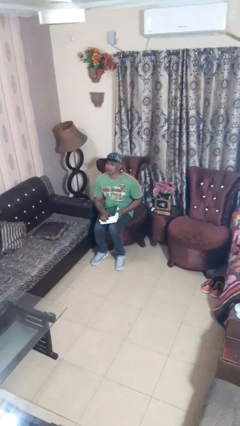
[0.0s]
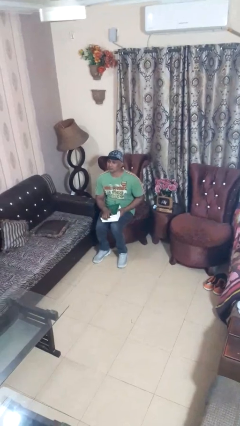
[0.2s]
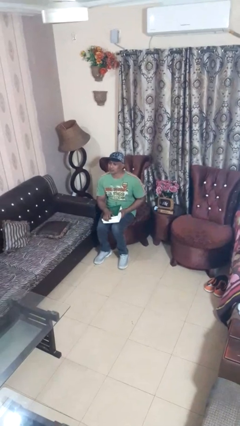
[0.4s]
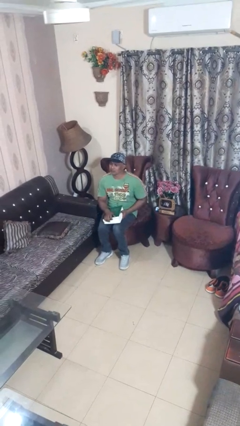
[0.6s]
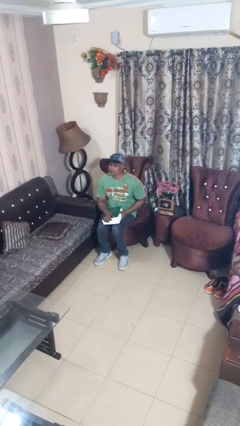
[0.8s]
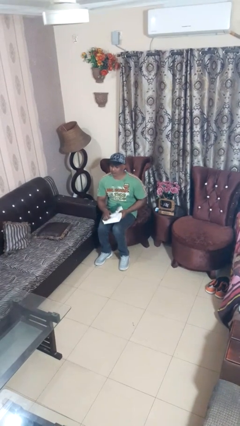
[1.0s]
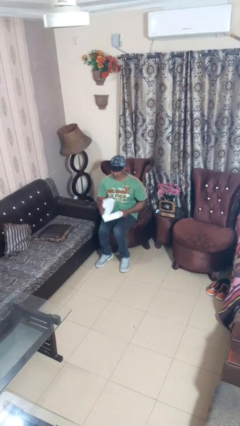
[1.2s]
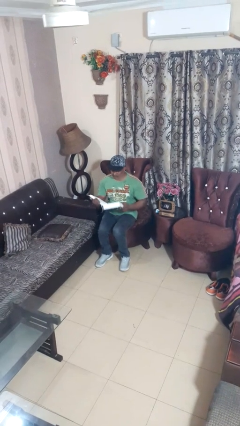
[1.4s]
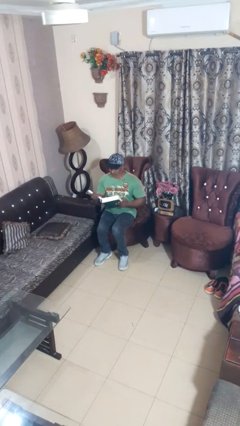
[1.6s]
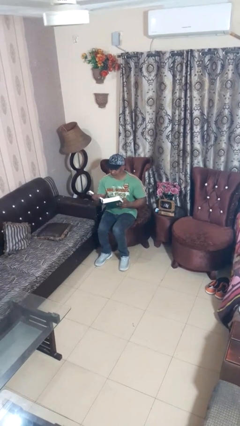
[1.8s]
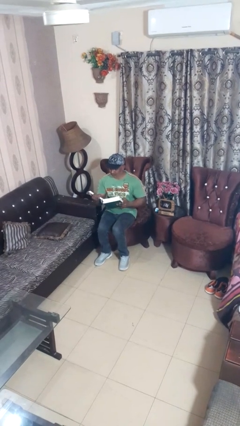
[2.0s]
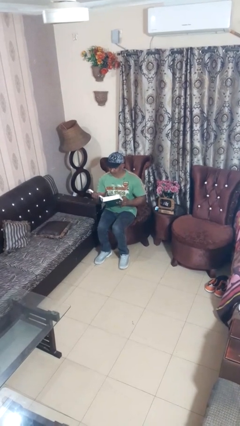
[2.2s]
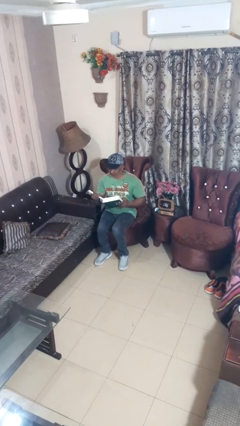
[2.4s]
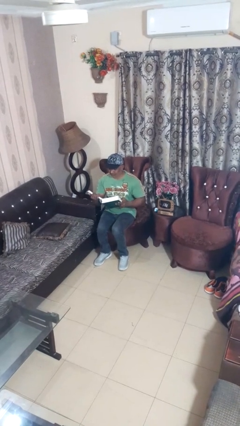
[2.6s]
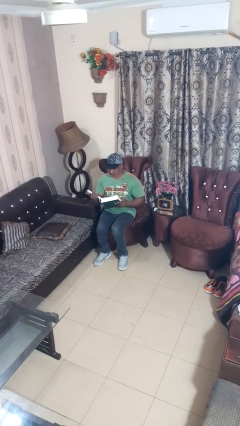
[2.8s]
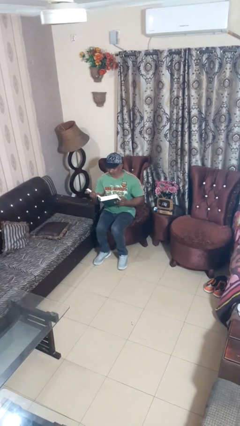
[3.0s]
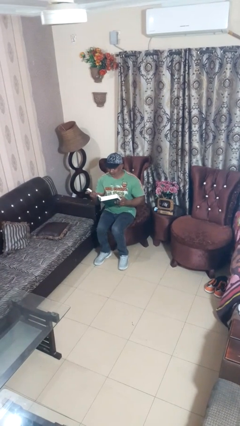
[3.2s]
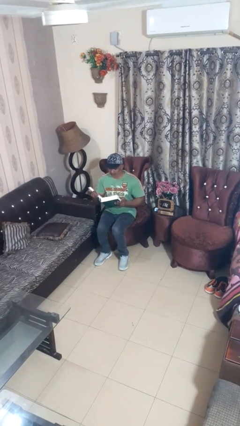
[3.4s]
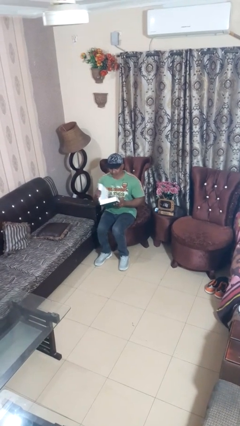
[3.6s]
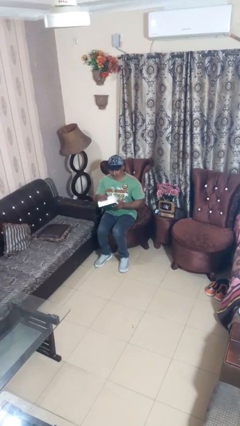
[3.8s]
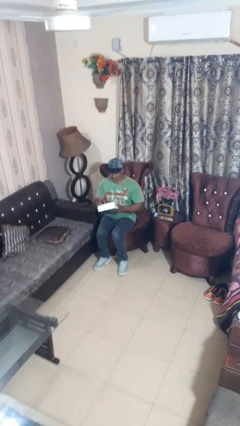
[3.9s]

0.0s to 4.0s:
person reads book

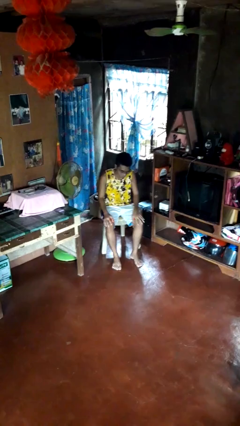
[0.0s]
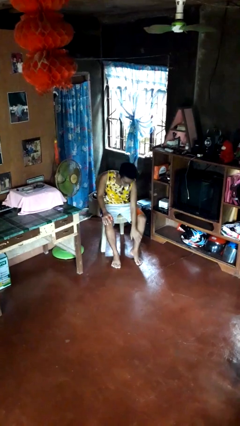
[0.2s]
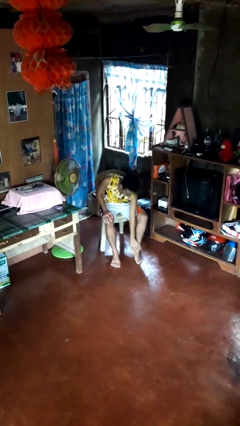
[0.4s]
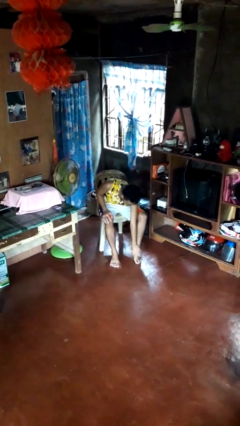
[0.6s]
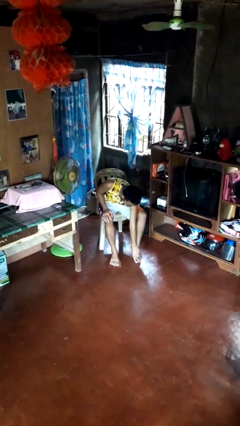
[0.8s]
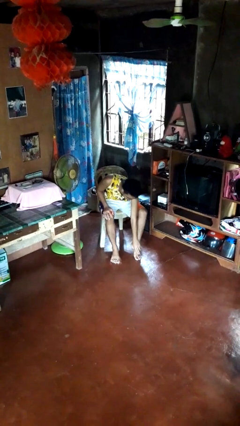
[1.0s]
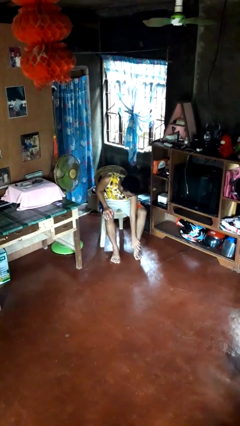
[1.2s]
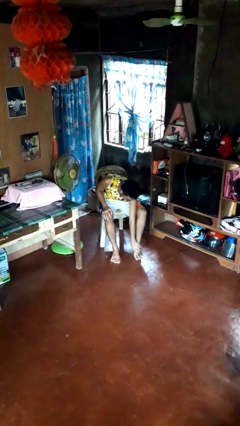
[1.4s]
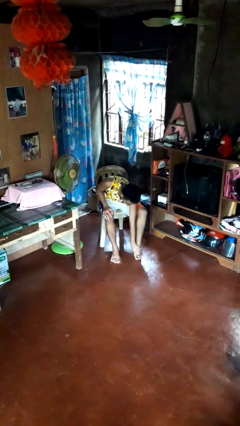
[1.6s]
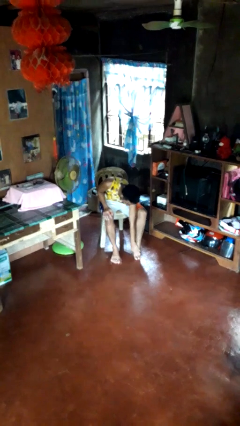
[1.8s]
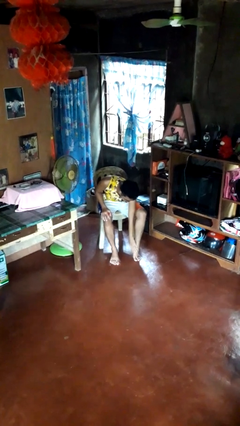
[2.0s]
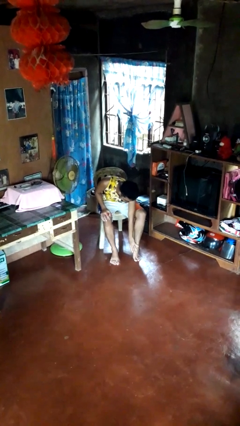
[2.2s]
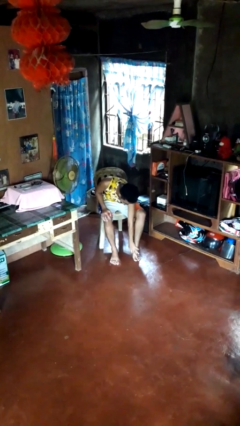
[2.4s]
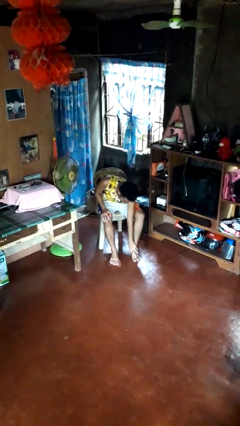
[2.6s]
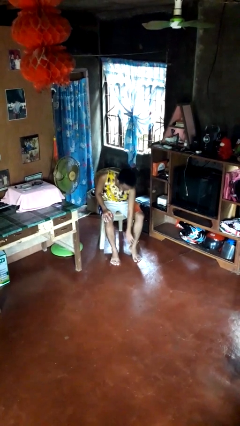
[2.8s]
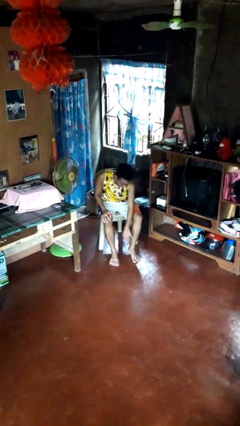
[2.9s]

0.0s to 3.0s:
person rubs foot

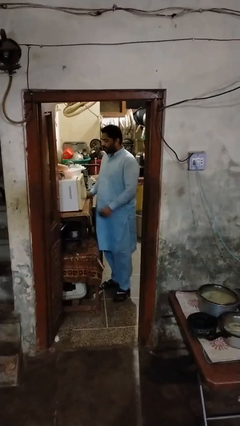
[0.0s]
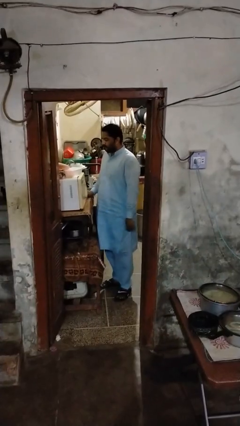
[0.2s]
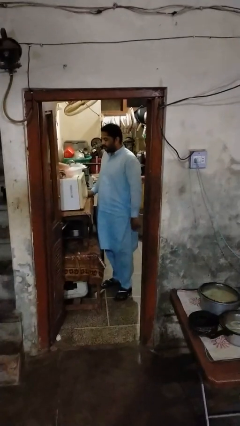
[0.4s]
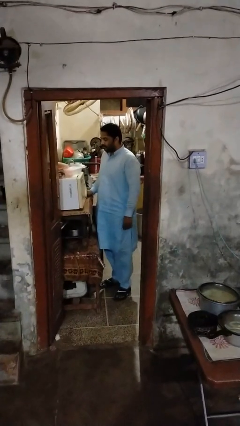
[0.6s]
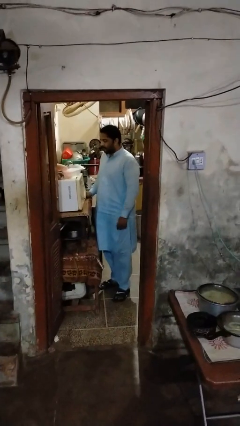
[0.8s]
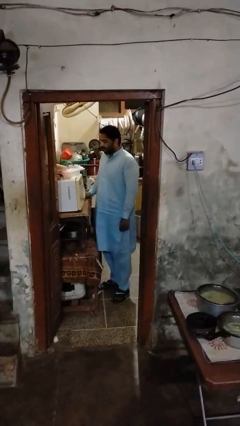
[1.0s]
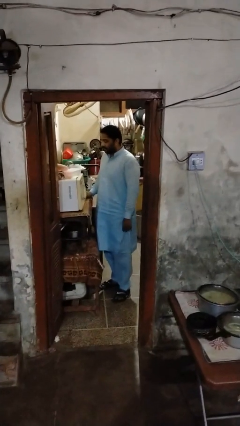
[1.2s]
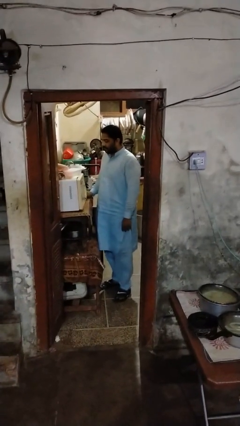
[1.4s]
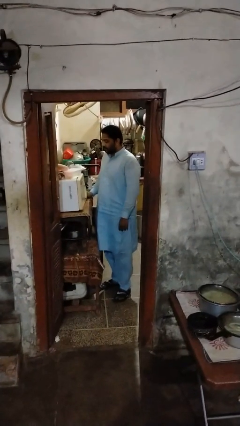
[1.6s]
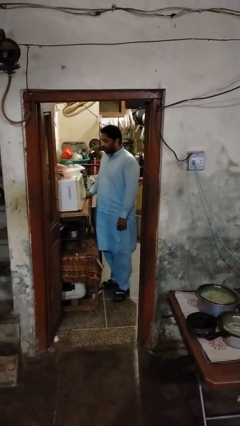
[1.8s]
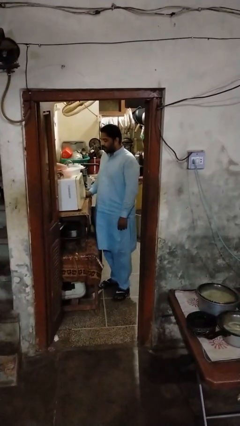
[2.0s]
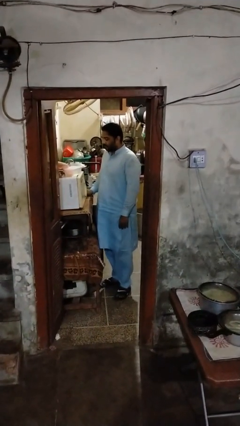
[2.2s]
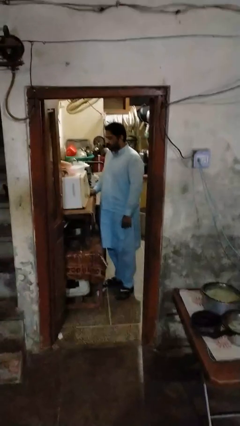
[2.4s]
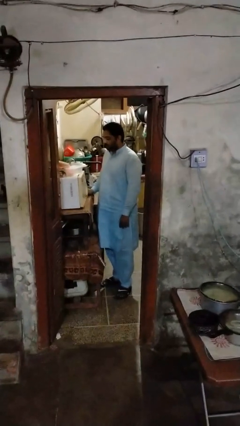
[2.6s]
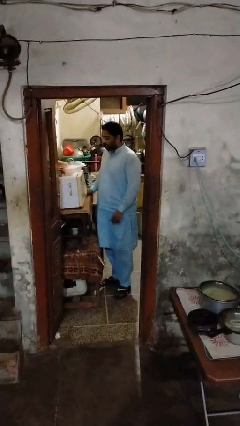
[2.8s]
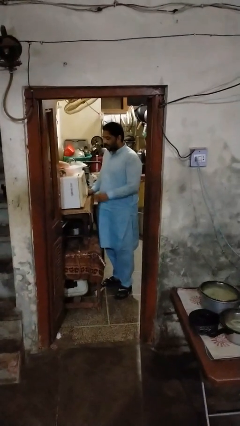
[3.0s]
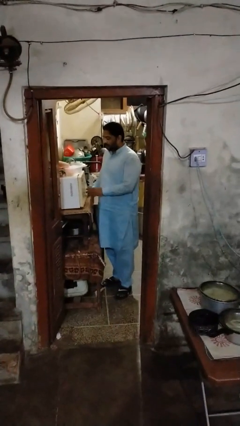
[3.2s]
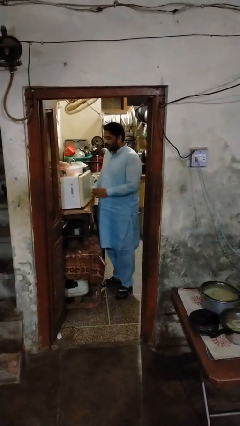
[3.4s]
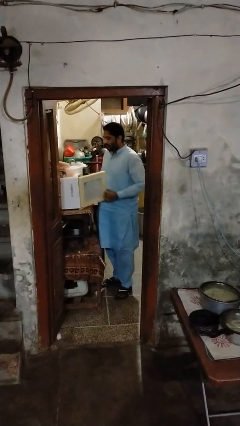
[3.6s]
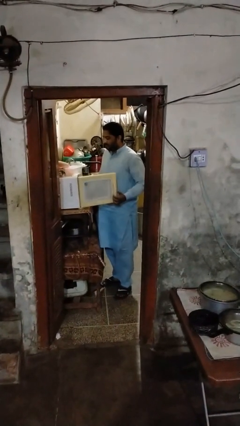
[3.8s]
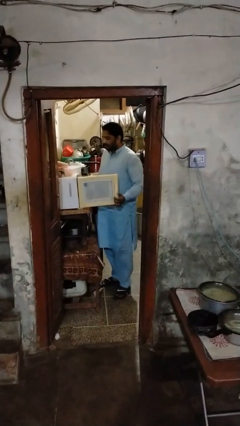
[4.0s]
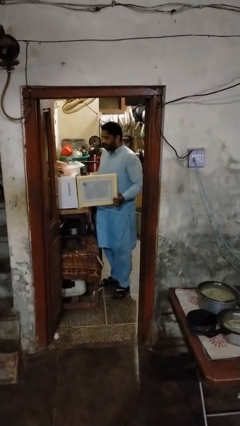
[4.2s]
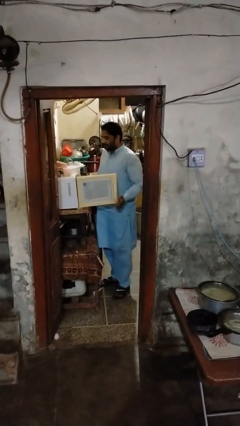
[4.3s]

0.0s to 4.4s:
person falls from bed

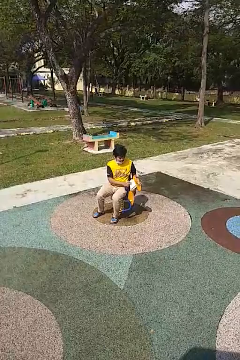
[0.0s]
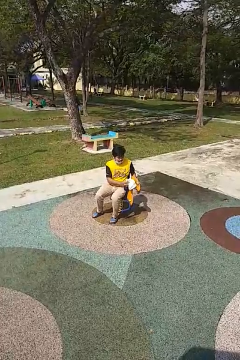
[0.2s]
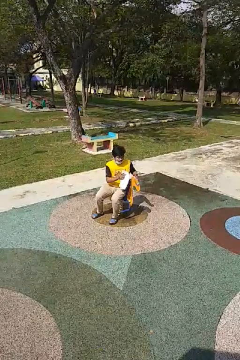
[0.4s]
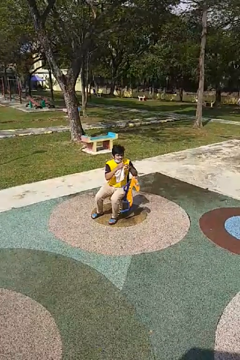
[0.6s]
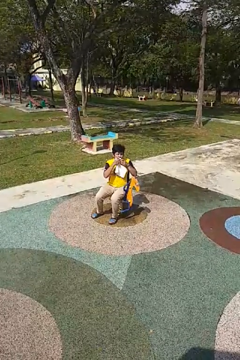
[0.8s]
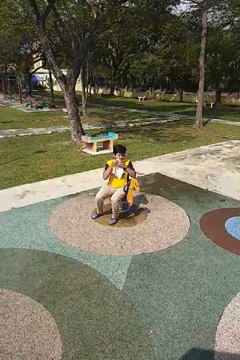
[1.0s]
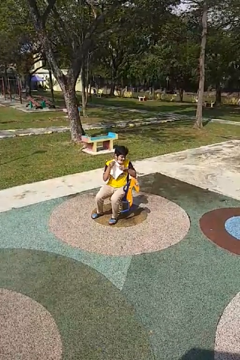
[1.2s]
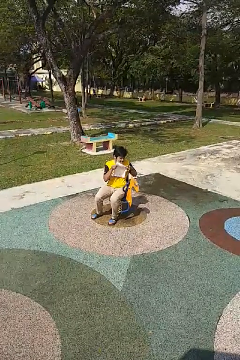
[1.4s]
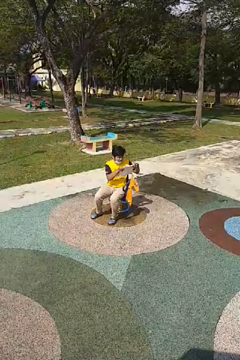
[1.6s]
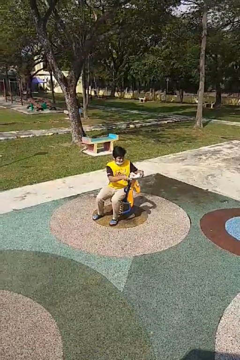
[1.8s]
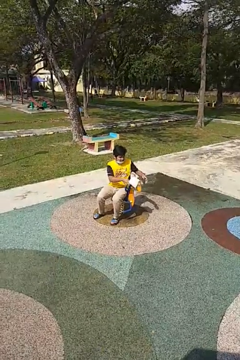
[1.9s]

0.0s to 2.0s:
person wipes mouth with napkin

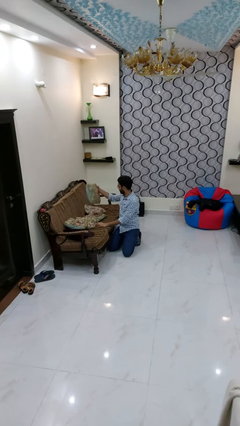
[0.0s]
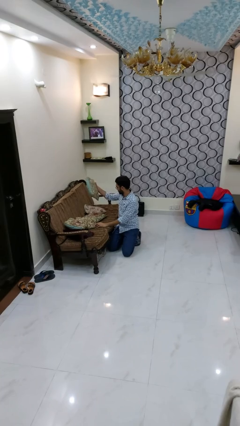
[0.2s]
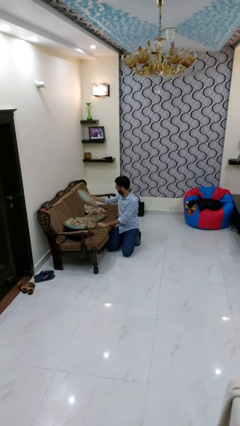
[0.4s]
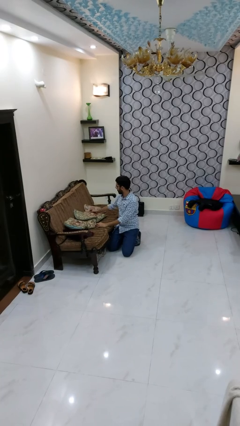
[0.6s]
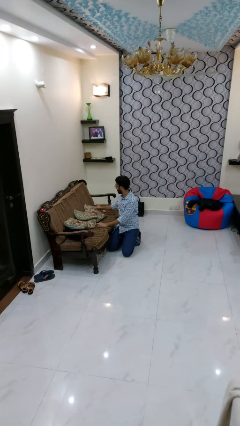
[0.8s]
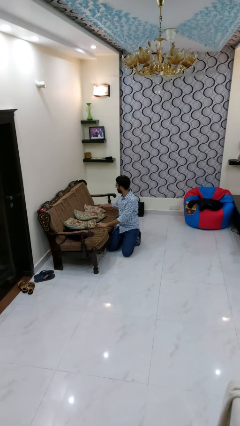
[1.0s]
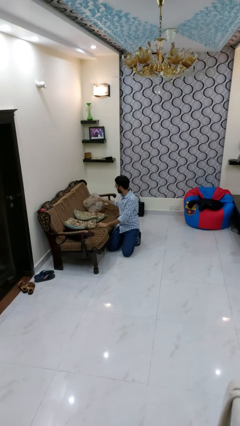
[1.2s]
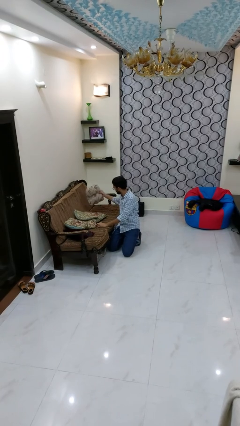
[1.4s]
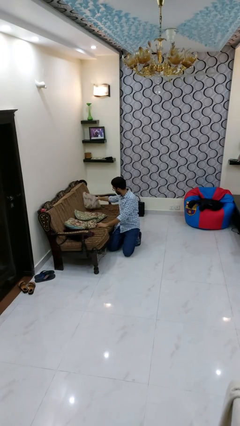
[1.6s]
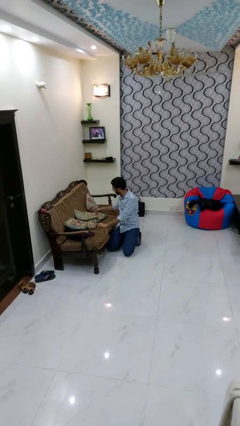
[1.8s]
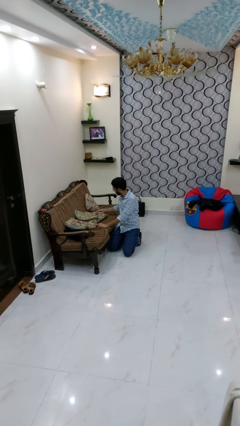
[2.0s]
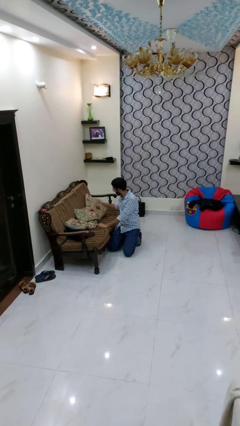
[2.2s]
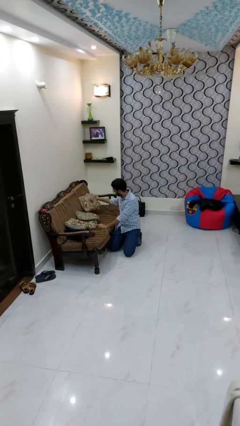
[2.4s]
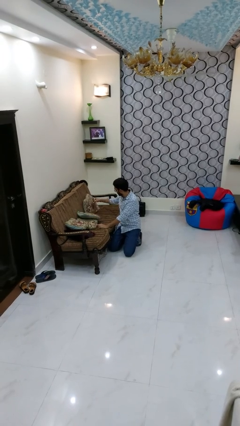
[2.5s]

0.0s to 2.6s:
person searches in couch

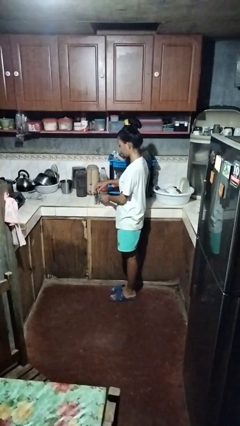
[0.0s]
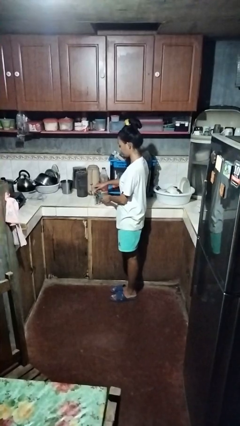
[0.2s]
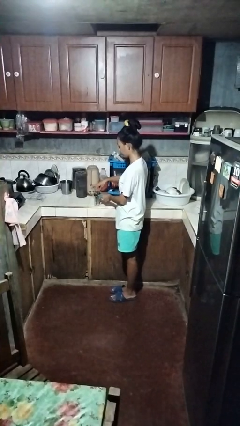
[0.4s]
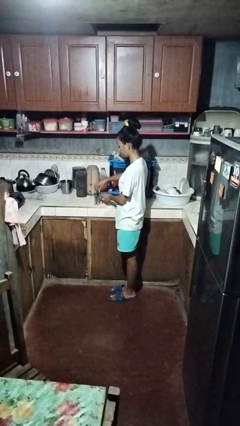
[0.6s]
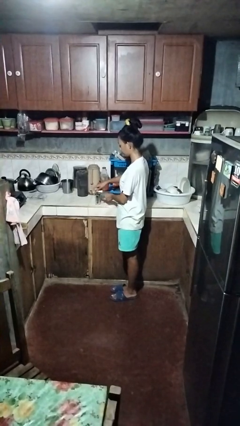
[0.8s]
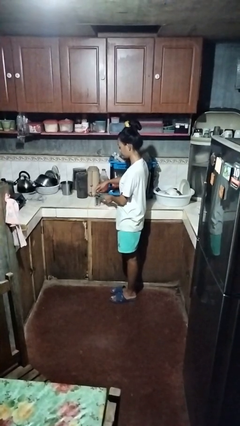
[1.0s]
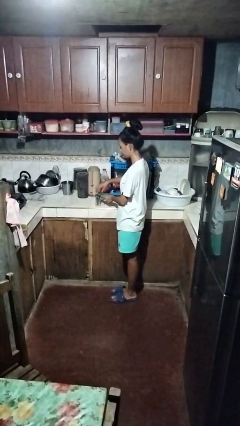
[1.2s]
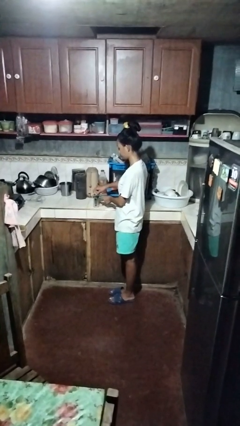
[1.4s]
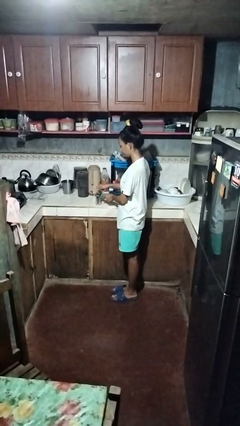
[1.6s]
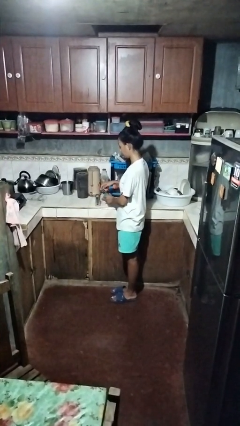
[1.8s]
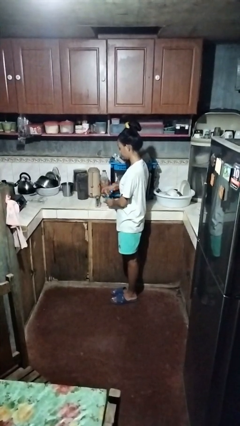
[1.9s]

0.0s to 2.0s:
person opens can with can opener

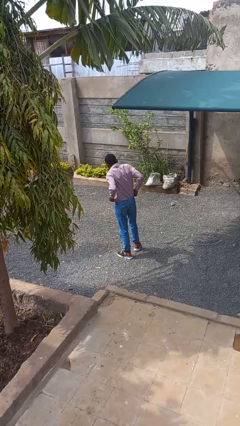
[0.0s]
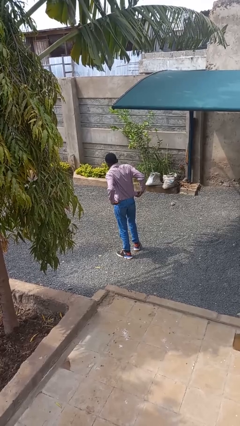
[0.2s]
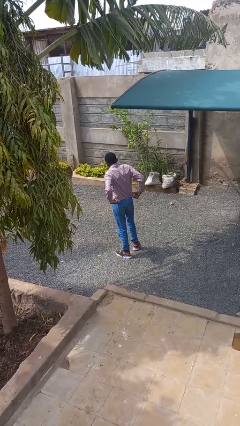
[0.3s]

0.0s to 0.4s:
person tucks in shirt
